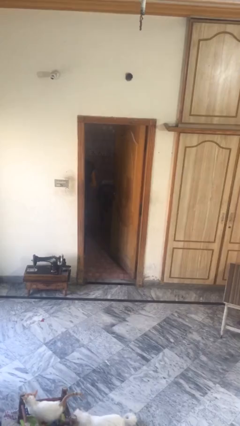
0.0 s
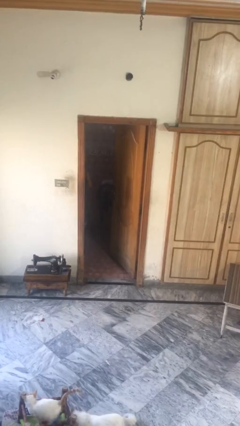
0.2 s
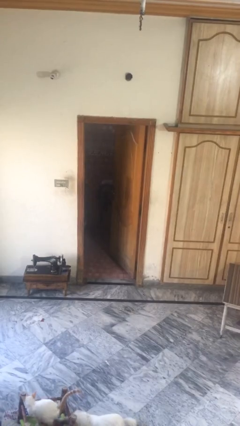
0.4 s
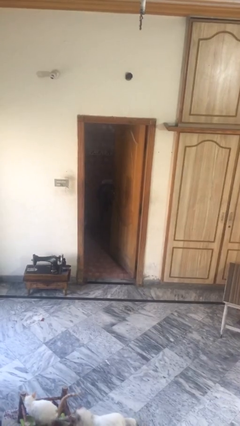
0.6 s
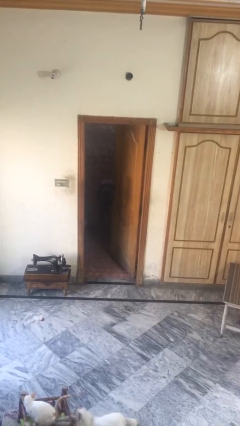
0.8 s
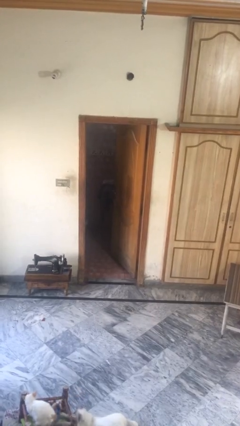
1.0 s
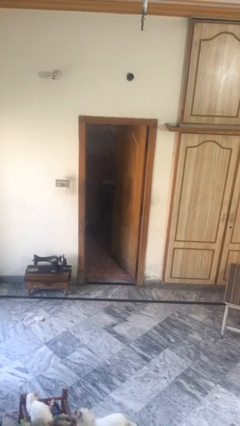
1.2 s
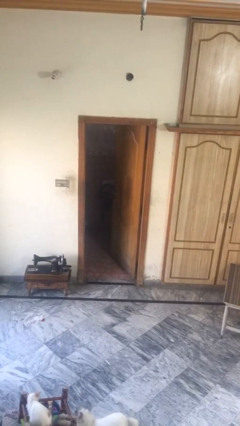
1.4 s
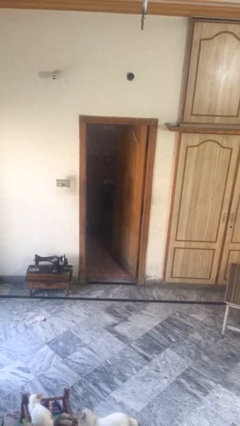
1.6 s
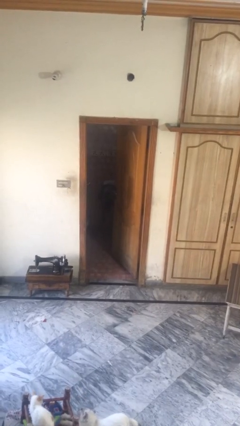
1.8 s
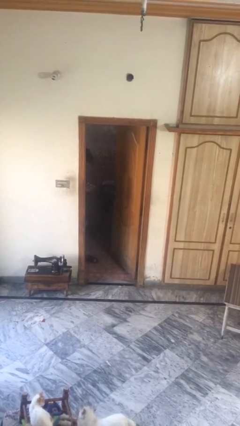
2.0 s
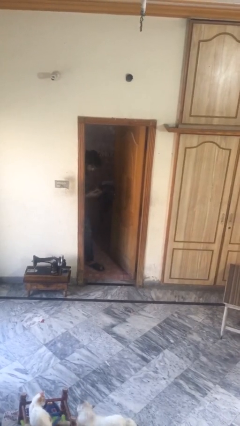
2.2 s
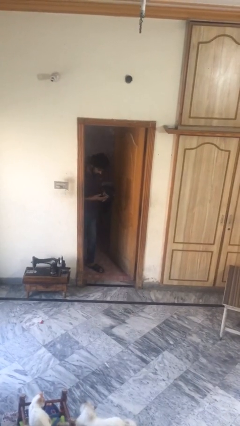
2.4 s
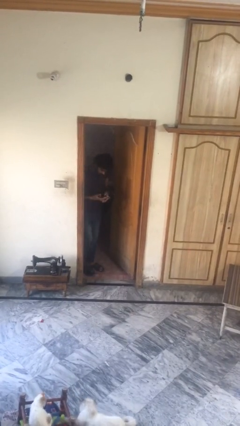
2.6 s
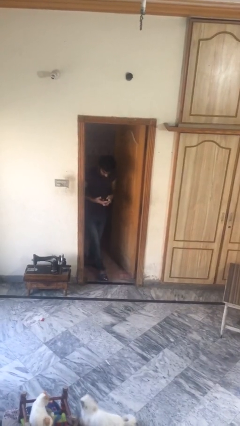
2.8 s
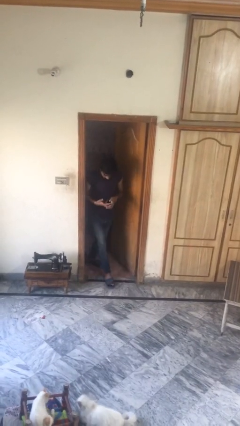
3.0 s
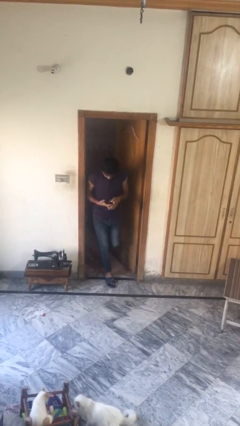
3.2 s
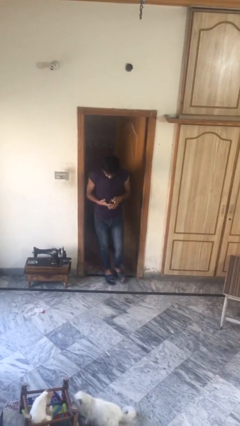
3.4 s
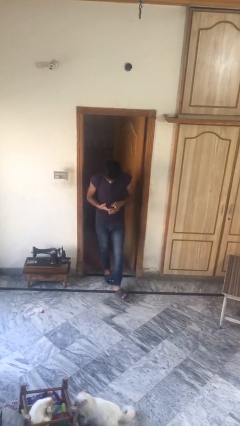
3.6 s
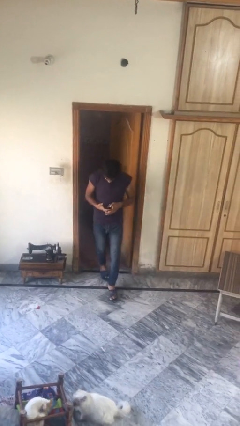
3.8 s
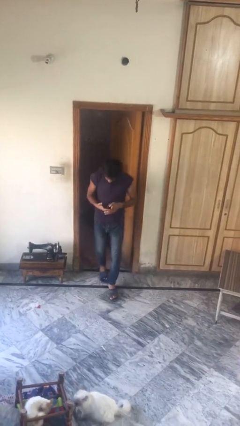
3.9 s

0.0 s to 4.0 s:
person enters scene through structure

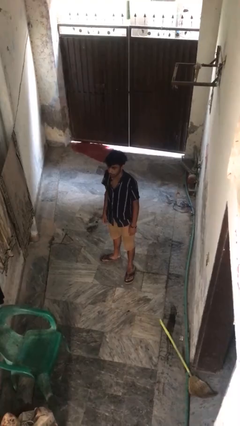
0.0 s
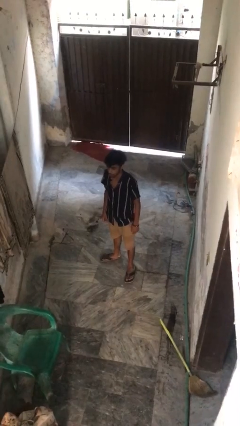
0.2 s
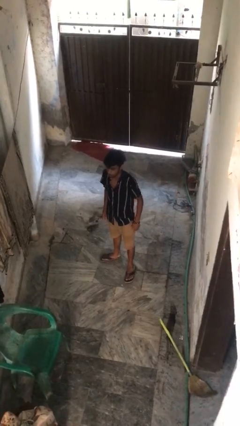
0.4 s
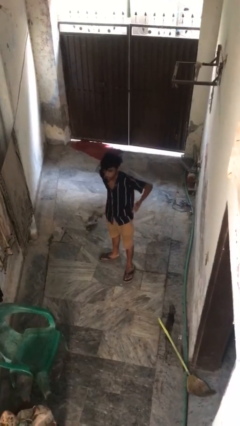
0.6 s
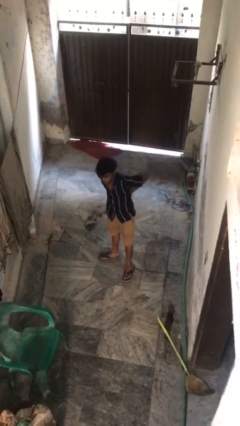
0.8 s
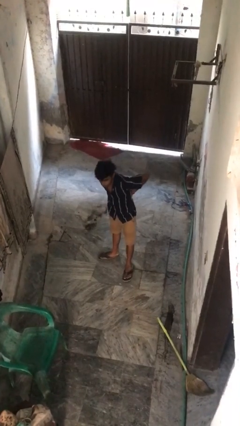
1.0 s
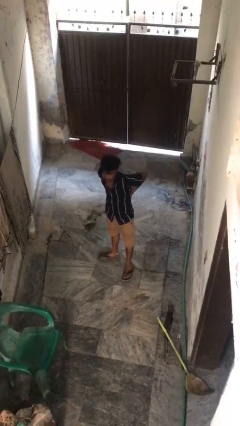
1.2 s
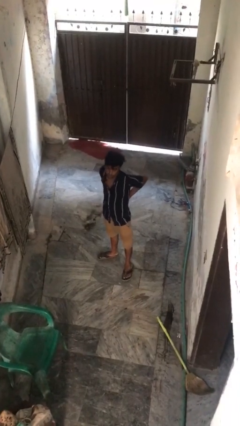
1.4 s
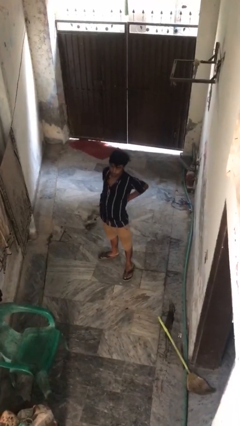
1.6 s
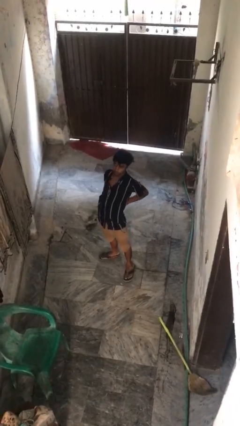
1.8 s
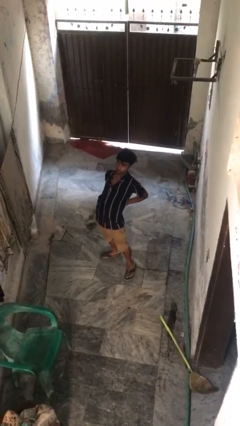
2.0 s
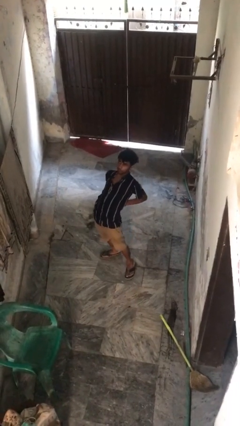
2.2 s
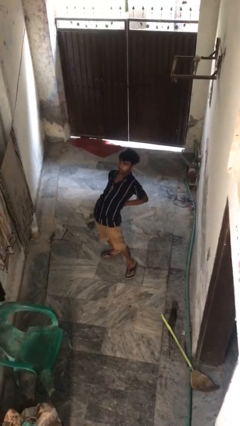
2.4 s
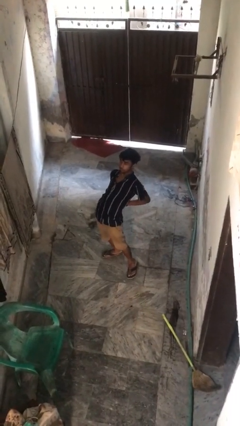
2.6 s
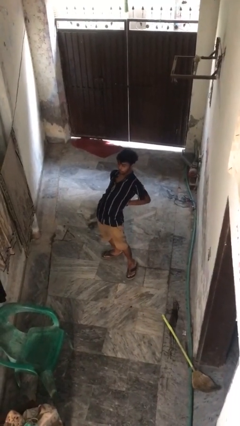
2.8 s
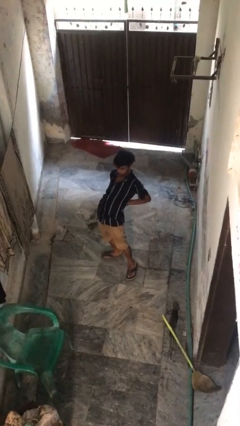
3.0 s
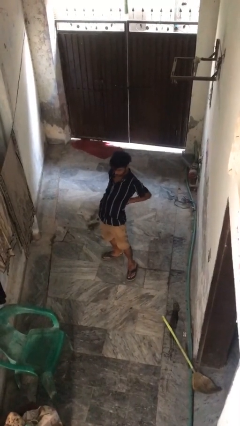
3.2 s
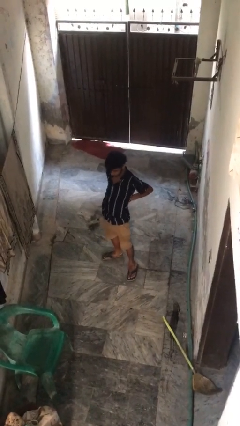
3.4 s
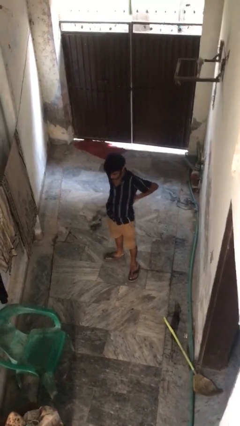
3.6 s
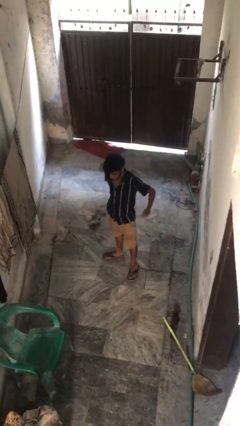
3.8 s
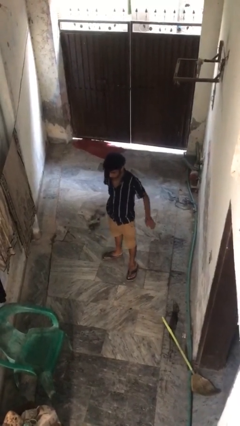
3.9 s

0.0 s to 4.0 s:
person stretches back

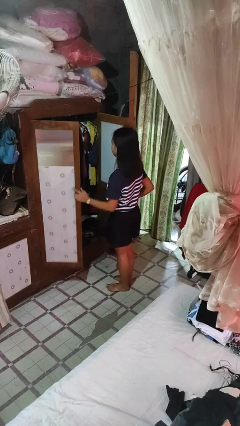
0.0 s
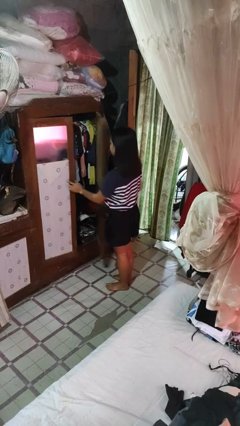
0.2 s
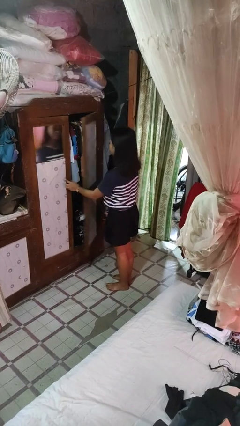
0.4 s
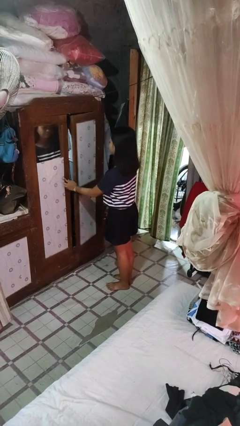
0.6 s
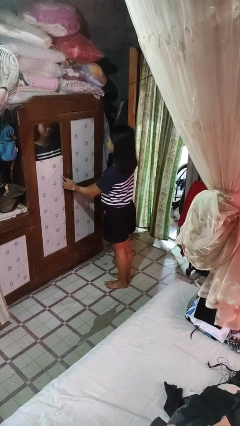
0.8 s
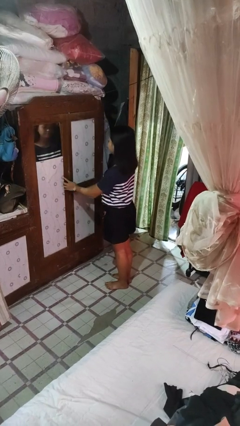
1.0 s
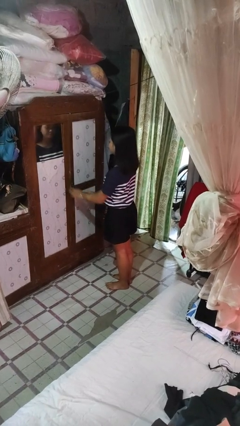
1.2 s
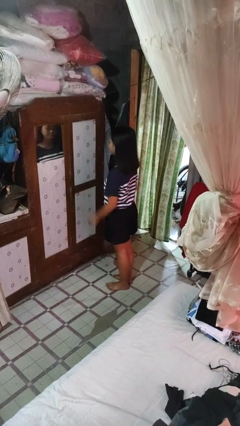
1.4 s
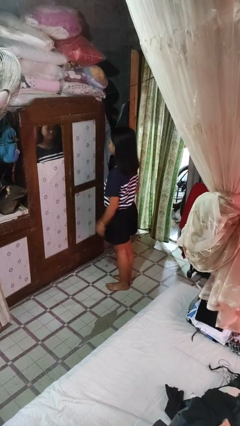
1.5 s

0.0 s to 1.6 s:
person closes closet door

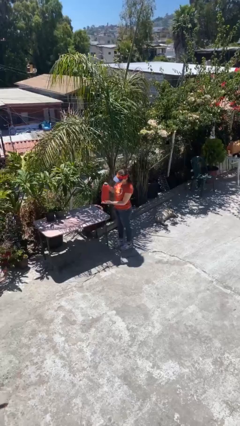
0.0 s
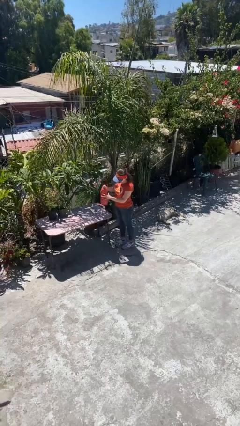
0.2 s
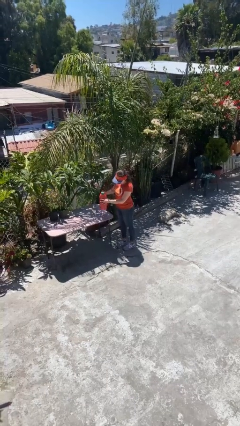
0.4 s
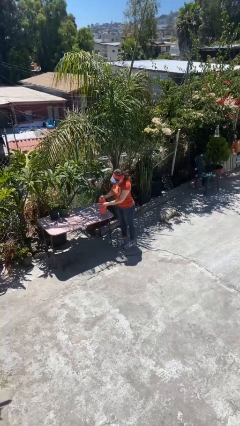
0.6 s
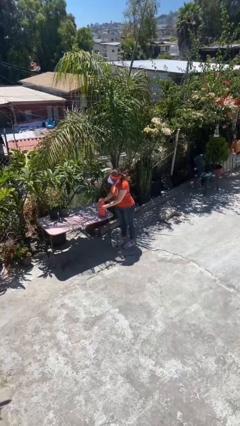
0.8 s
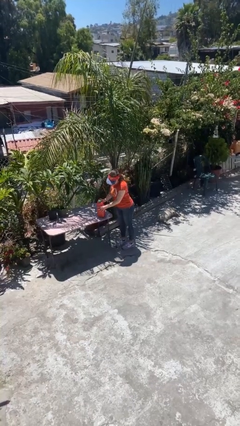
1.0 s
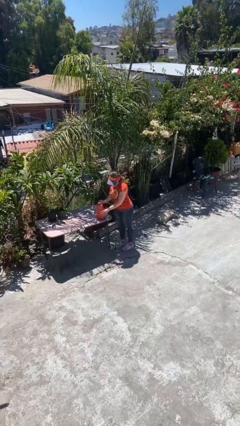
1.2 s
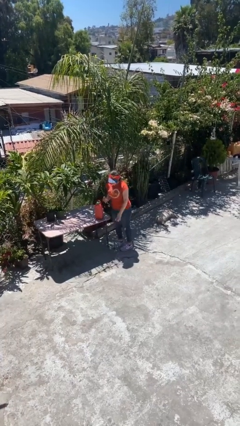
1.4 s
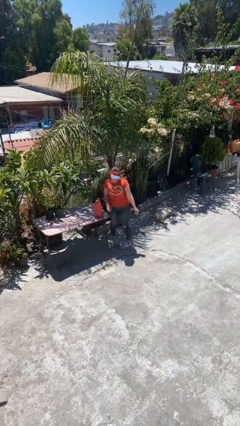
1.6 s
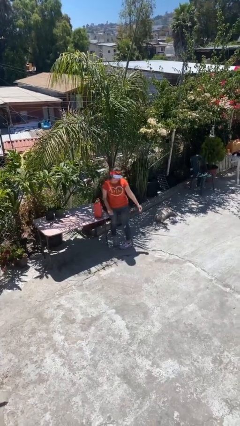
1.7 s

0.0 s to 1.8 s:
person puts down object on table

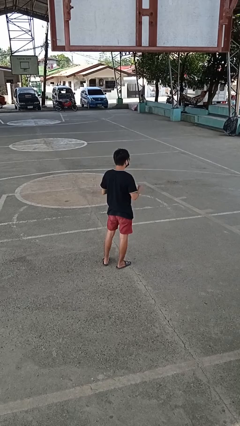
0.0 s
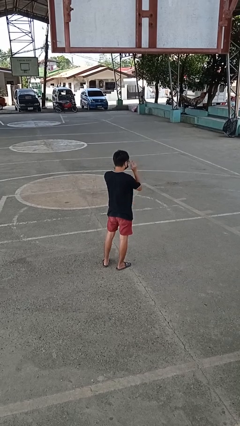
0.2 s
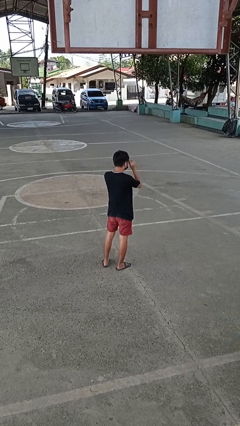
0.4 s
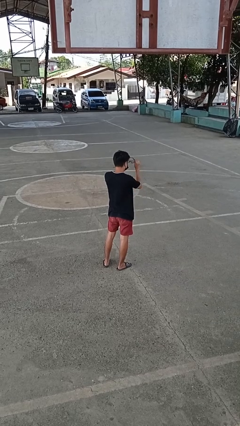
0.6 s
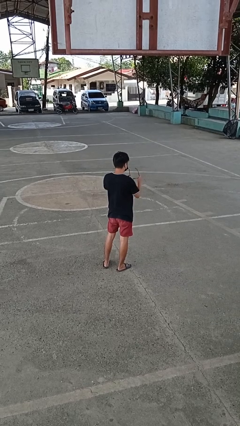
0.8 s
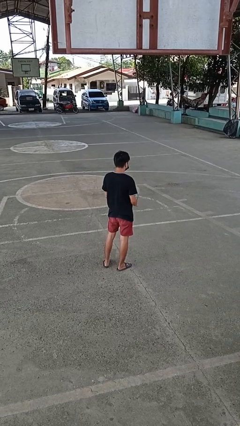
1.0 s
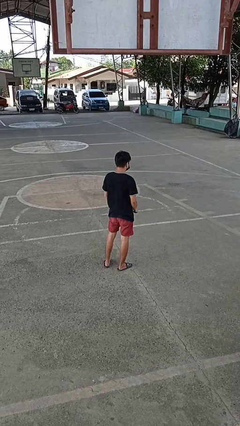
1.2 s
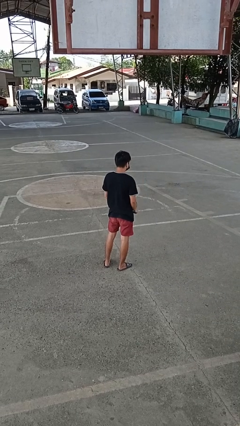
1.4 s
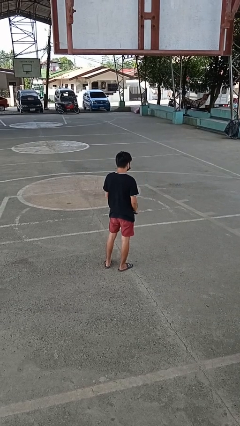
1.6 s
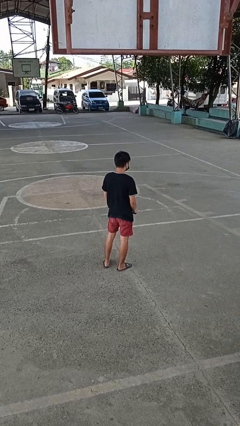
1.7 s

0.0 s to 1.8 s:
person takes off glasses

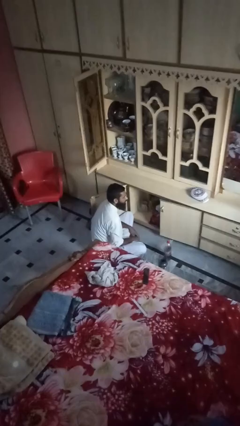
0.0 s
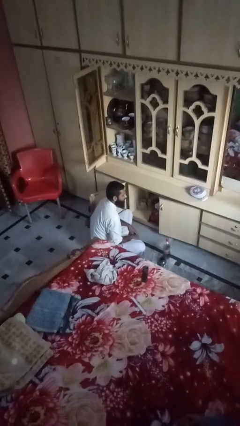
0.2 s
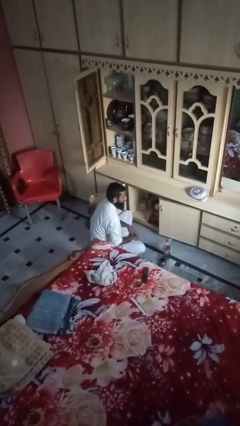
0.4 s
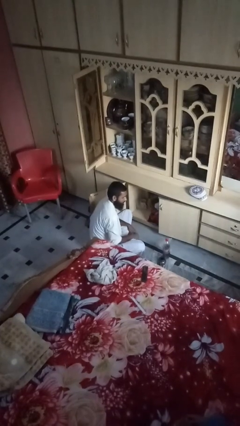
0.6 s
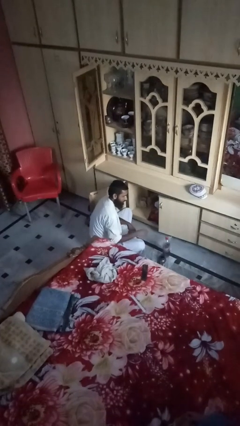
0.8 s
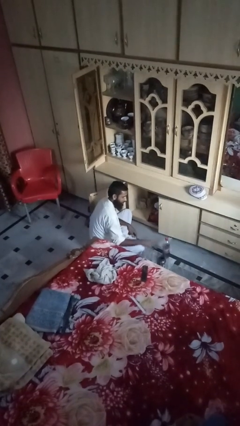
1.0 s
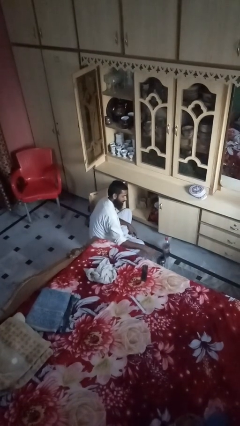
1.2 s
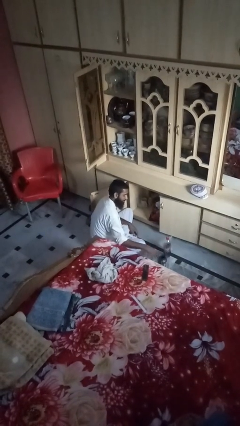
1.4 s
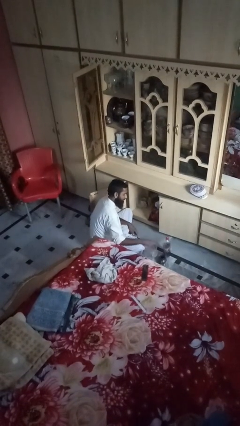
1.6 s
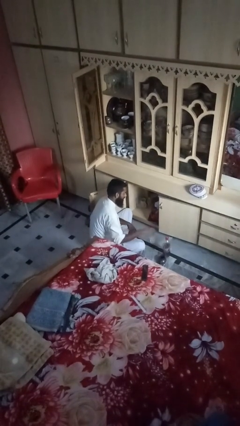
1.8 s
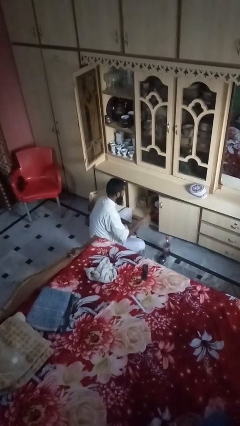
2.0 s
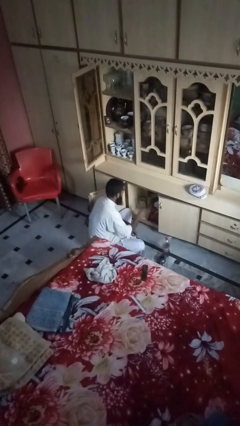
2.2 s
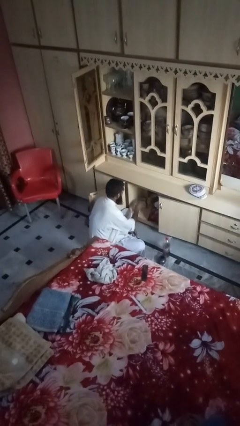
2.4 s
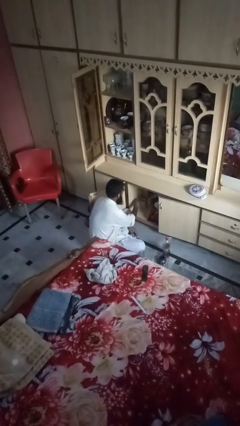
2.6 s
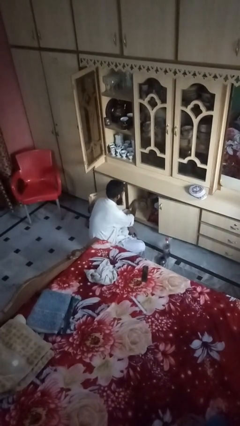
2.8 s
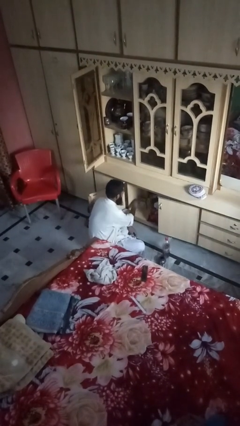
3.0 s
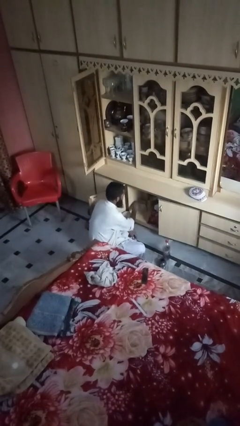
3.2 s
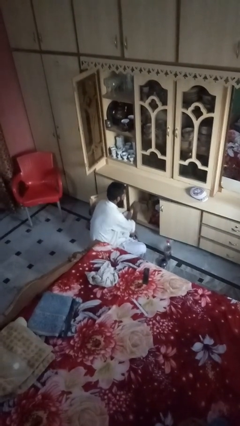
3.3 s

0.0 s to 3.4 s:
person loads groceries into cabinet

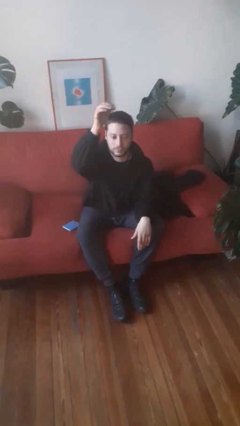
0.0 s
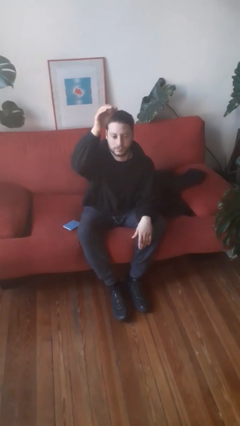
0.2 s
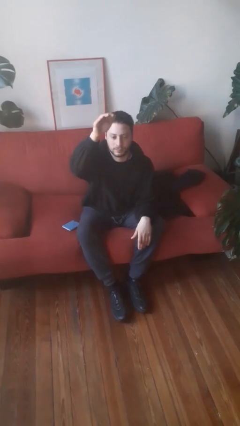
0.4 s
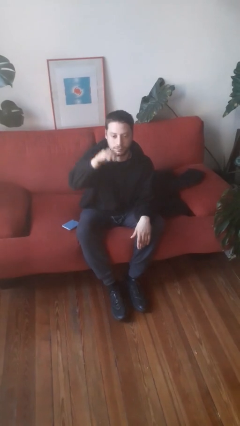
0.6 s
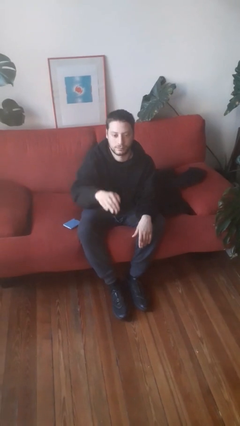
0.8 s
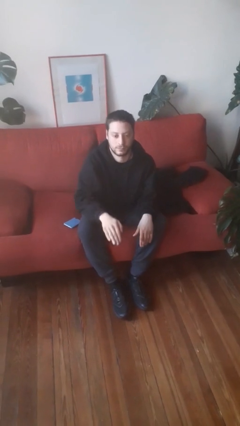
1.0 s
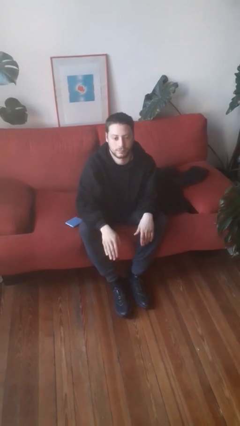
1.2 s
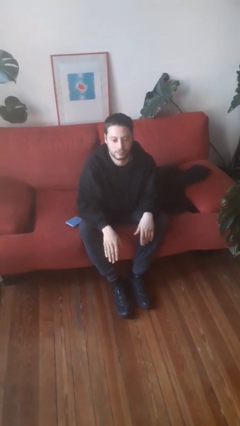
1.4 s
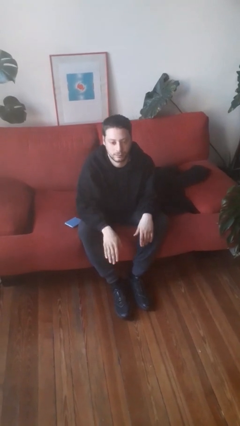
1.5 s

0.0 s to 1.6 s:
person gestures swipe down
